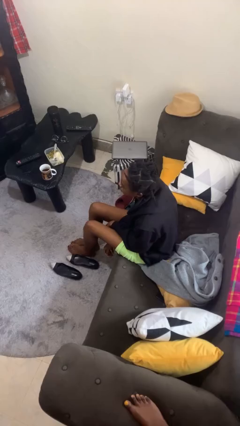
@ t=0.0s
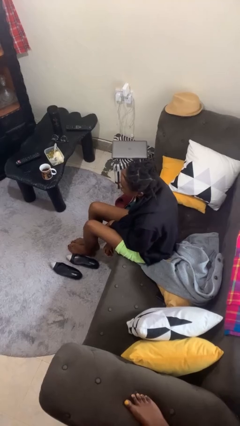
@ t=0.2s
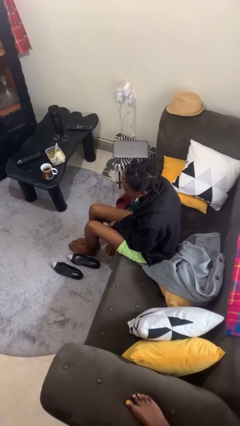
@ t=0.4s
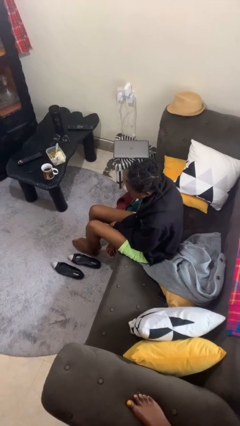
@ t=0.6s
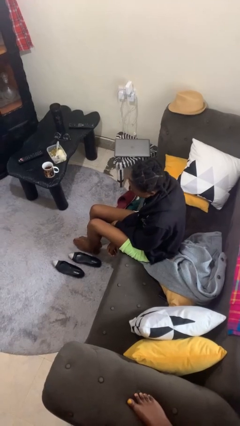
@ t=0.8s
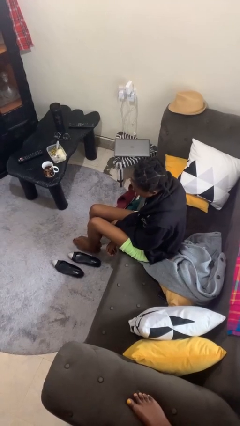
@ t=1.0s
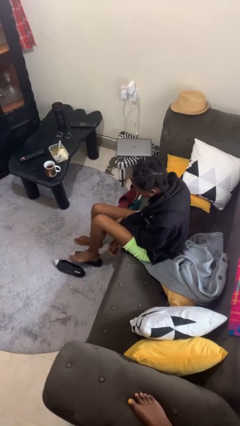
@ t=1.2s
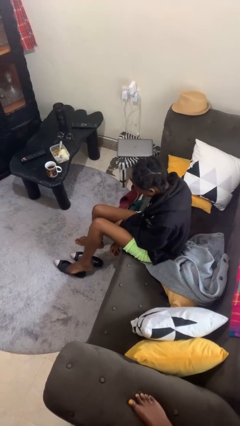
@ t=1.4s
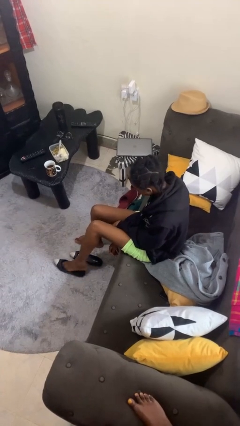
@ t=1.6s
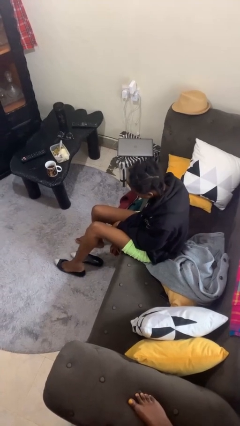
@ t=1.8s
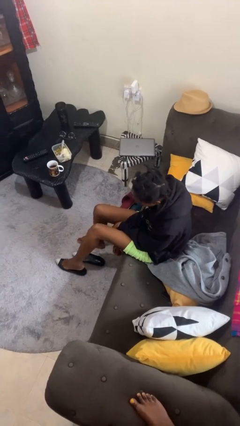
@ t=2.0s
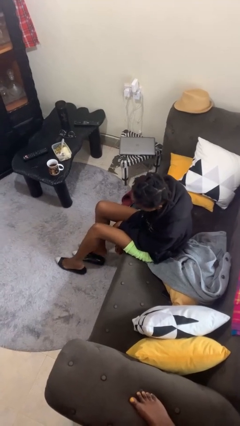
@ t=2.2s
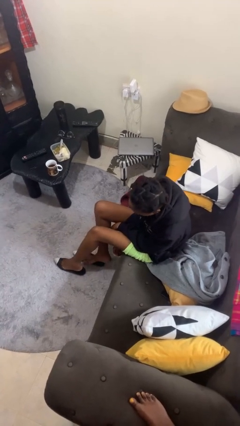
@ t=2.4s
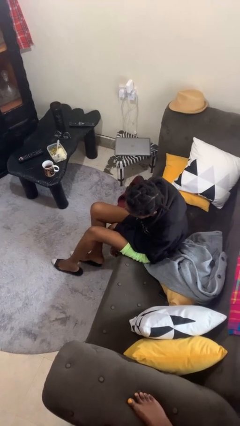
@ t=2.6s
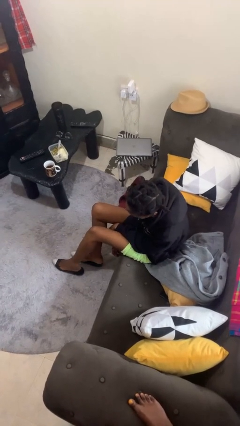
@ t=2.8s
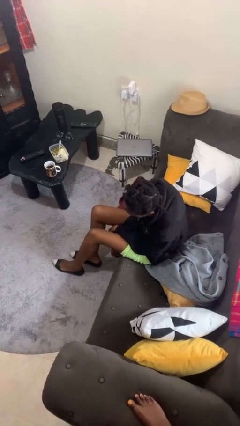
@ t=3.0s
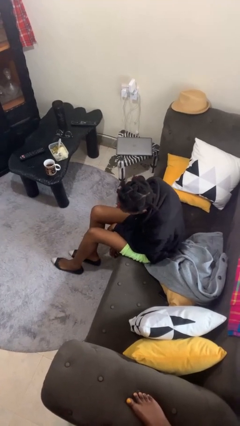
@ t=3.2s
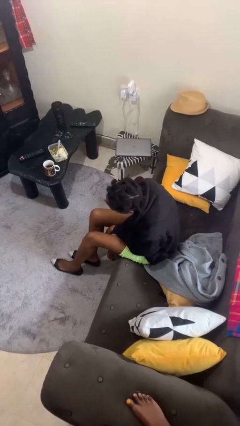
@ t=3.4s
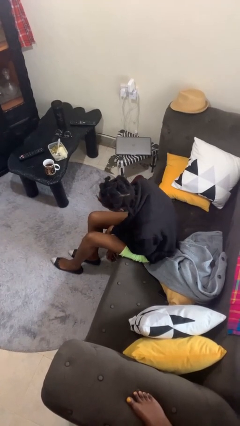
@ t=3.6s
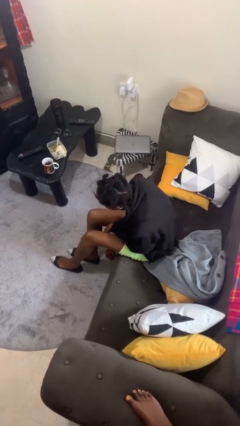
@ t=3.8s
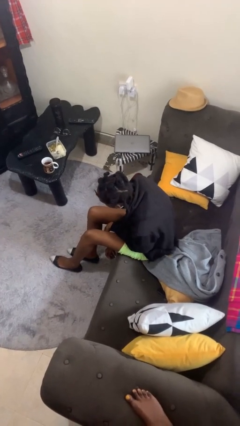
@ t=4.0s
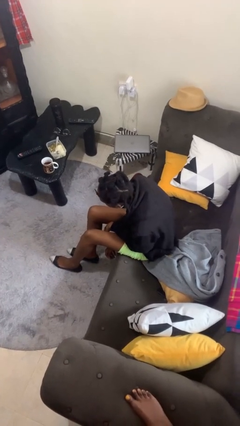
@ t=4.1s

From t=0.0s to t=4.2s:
person puts on shoes

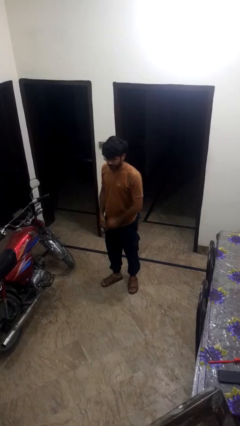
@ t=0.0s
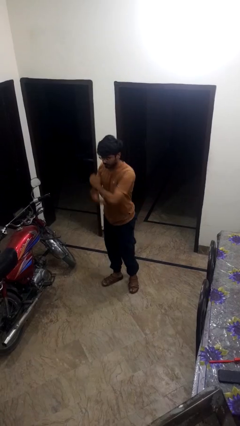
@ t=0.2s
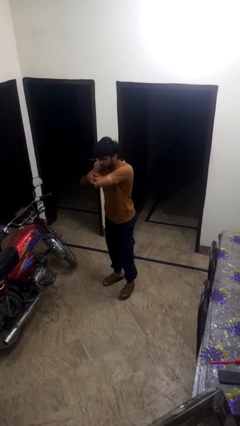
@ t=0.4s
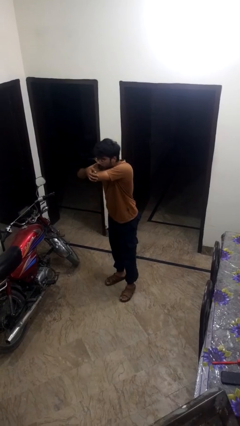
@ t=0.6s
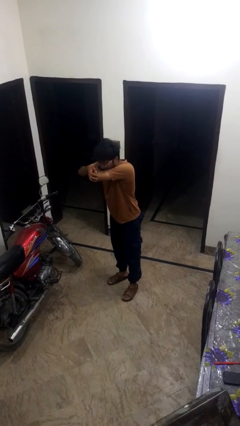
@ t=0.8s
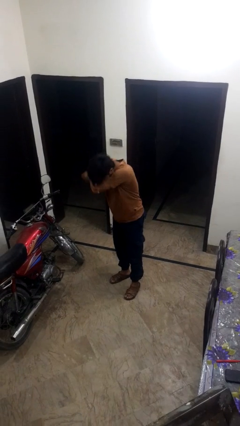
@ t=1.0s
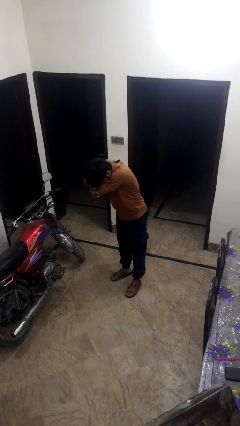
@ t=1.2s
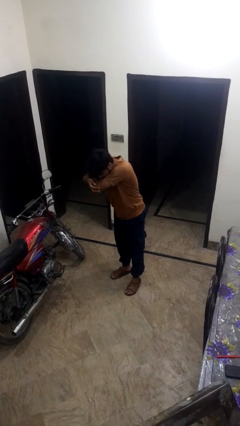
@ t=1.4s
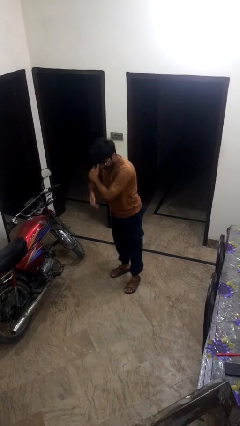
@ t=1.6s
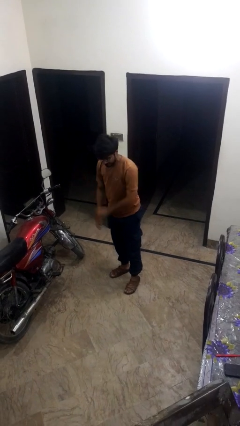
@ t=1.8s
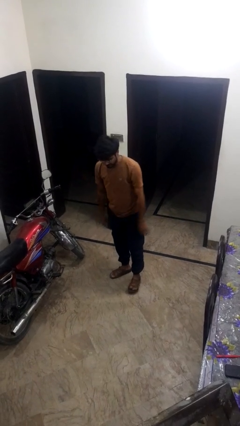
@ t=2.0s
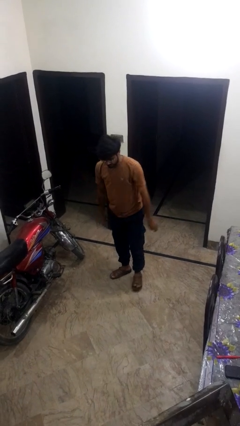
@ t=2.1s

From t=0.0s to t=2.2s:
person sneezes into arm

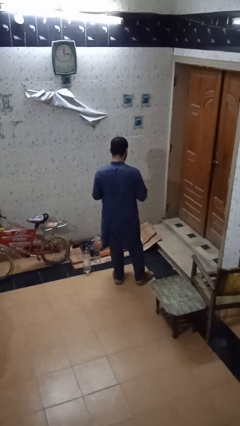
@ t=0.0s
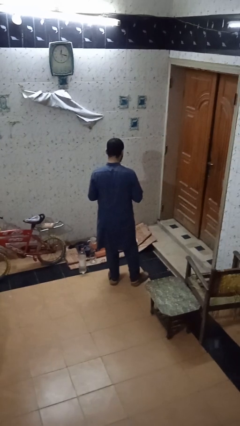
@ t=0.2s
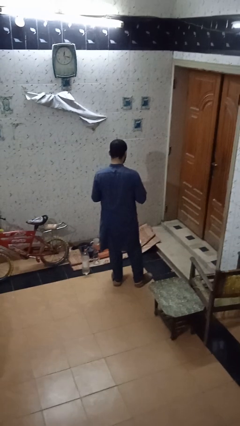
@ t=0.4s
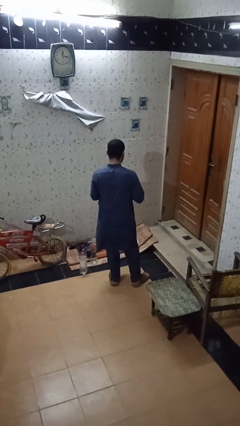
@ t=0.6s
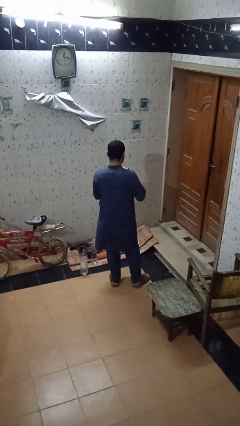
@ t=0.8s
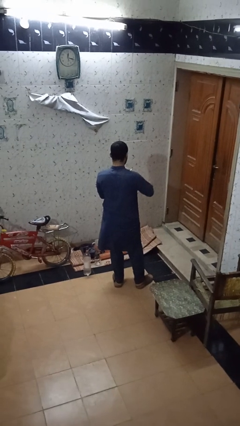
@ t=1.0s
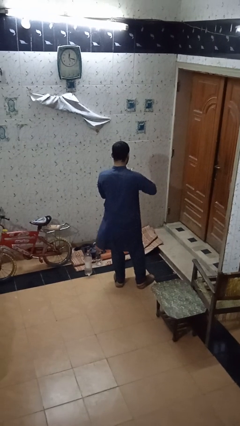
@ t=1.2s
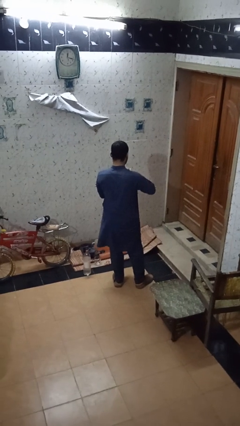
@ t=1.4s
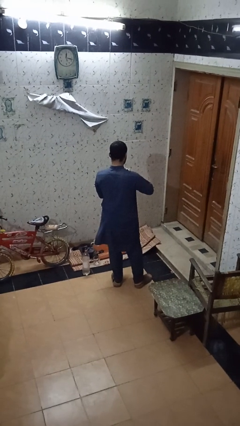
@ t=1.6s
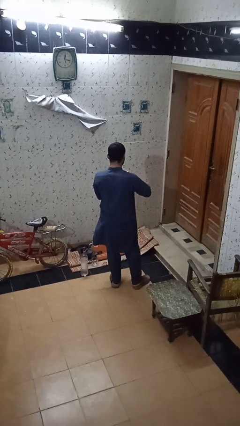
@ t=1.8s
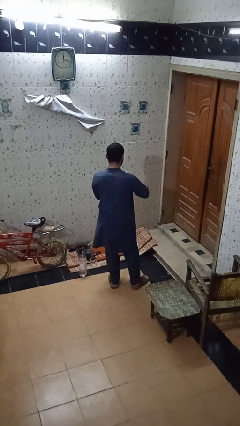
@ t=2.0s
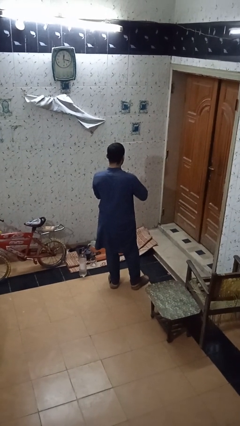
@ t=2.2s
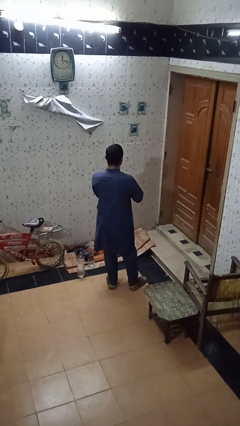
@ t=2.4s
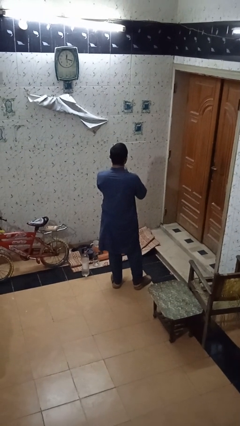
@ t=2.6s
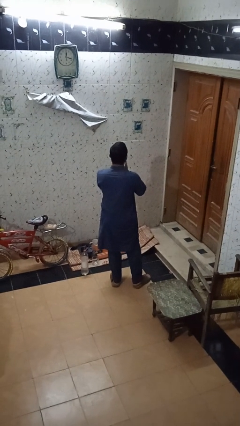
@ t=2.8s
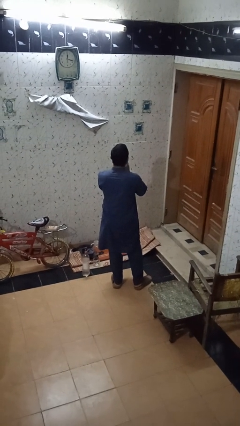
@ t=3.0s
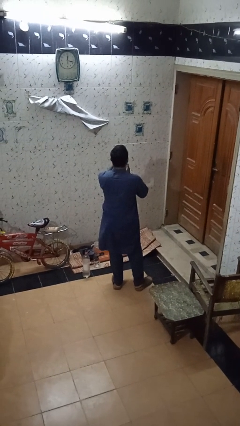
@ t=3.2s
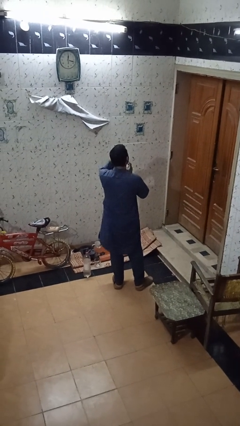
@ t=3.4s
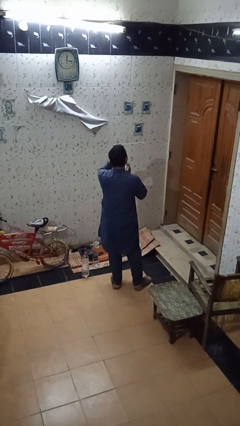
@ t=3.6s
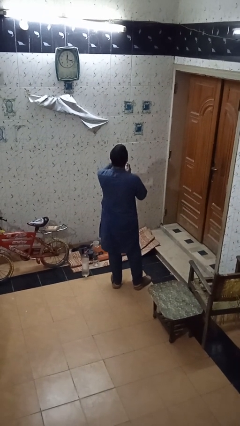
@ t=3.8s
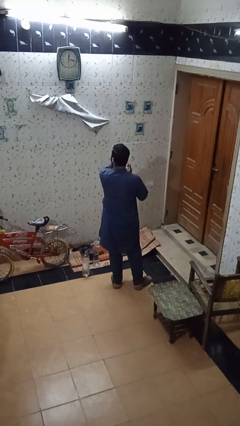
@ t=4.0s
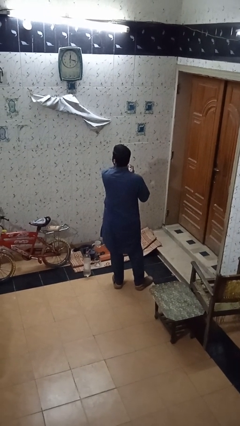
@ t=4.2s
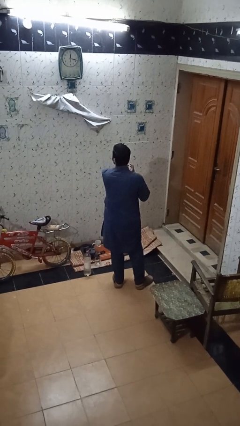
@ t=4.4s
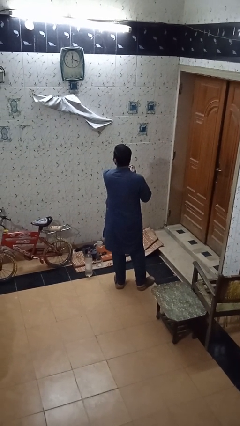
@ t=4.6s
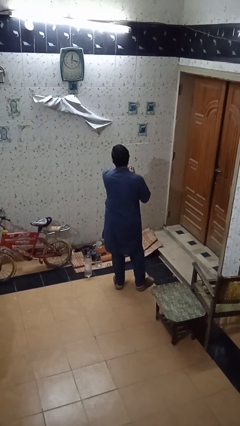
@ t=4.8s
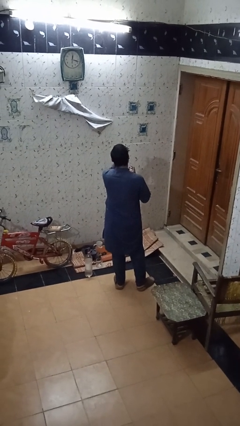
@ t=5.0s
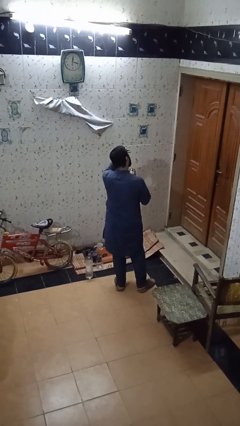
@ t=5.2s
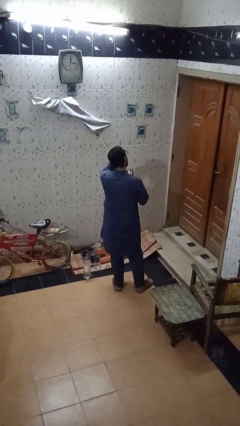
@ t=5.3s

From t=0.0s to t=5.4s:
person applies facial moisturizer

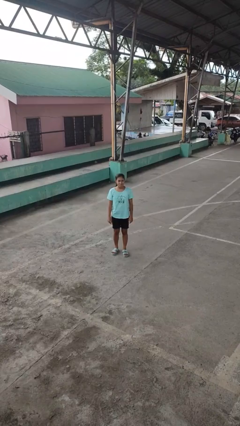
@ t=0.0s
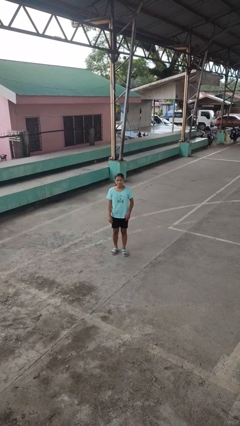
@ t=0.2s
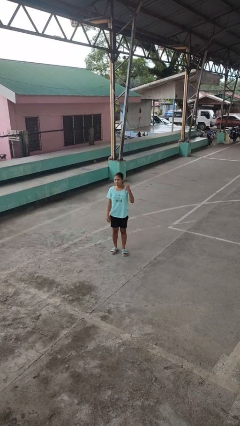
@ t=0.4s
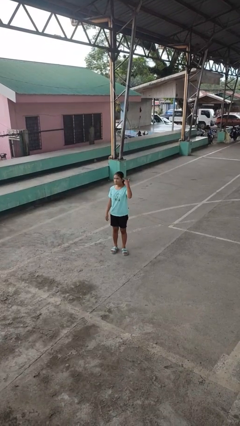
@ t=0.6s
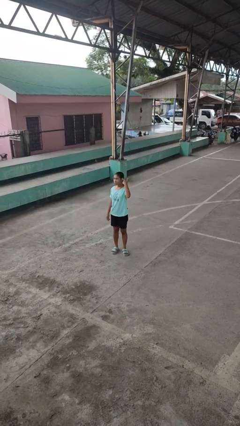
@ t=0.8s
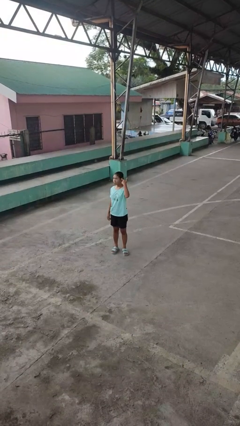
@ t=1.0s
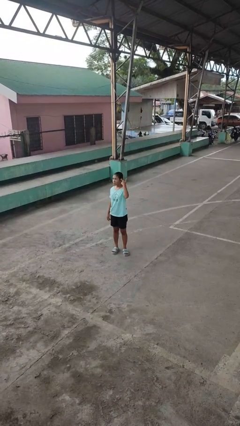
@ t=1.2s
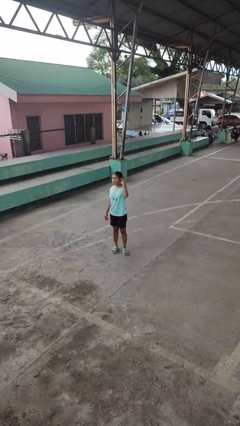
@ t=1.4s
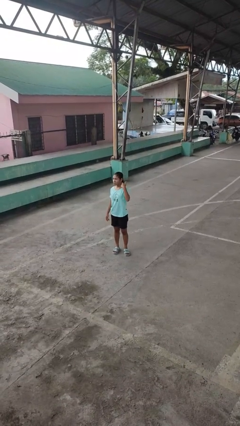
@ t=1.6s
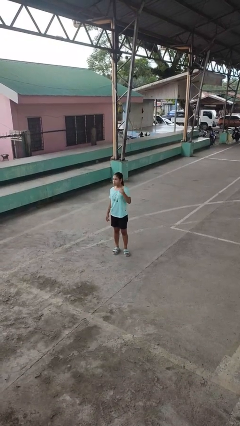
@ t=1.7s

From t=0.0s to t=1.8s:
person gestures listen closely

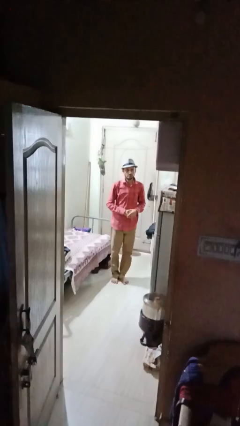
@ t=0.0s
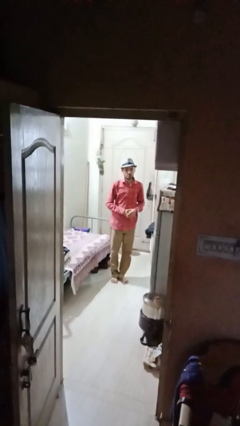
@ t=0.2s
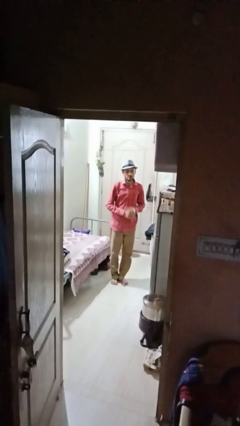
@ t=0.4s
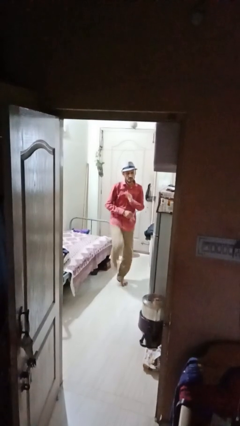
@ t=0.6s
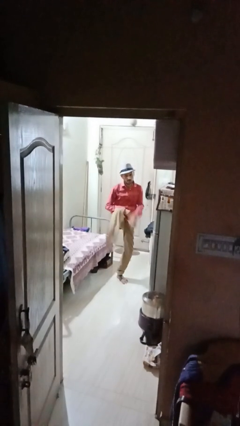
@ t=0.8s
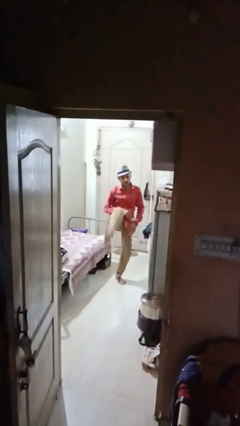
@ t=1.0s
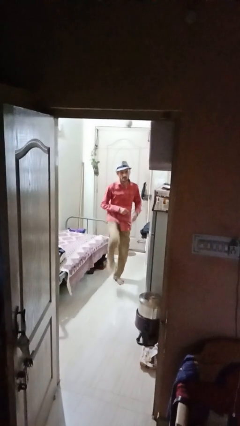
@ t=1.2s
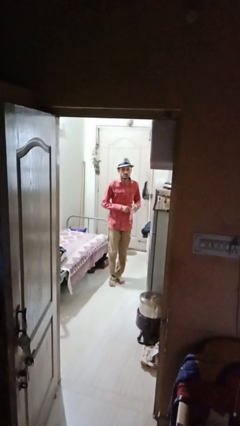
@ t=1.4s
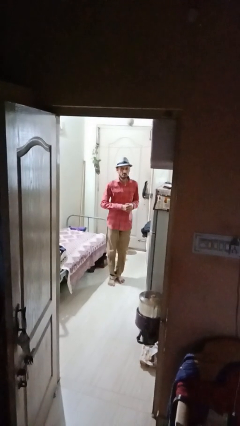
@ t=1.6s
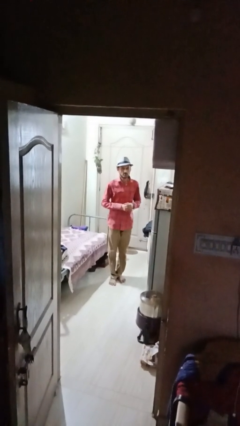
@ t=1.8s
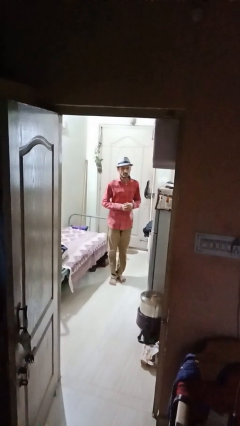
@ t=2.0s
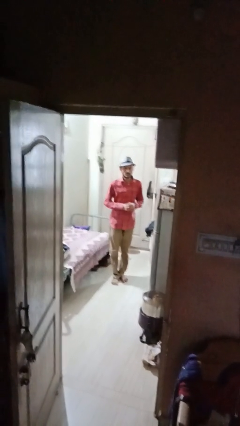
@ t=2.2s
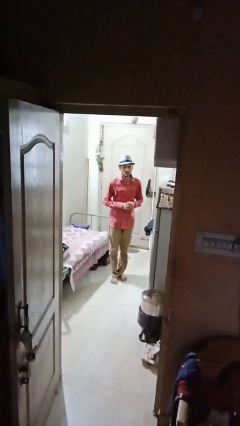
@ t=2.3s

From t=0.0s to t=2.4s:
person karate kicks

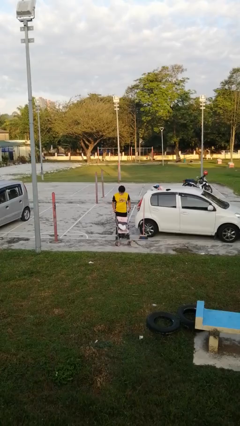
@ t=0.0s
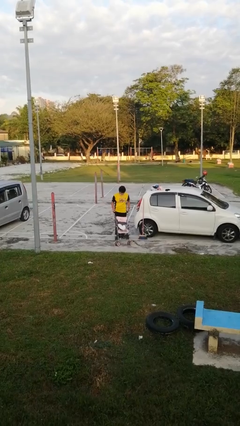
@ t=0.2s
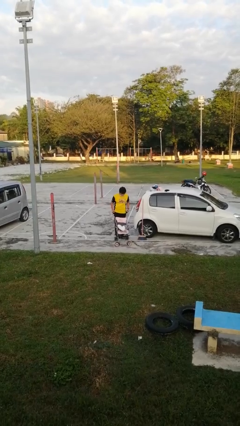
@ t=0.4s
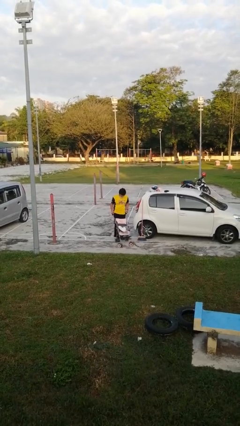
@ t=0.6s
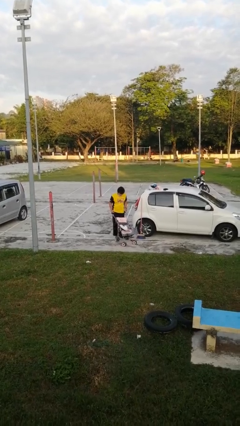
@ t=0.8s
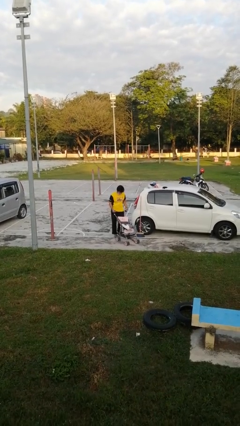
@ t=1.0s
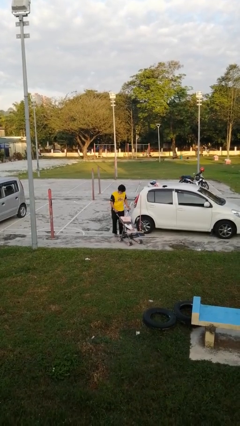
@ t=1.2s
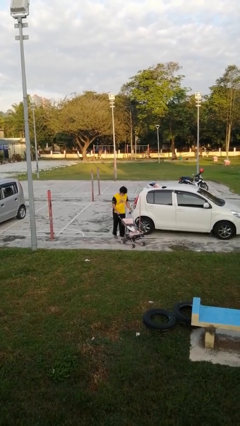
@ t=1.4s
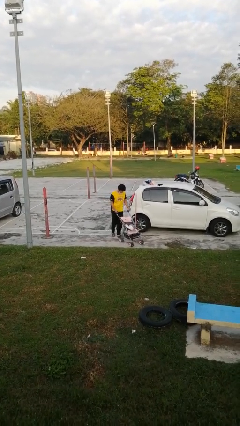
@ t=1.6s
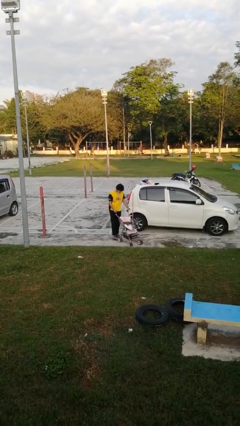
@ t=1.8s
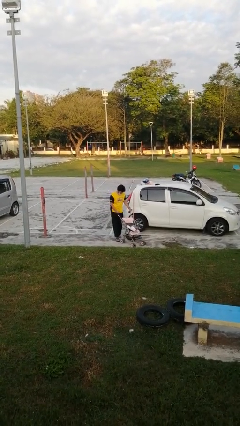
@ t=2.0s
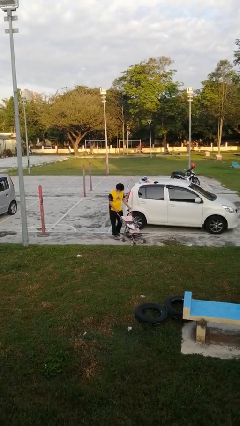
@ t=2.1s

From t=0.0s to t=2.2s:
person pushes wheeled cart
